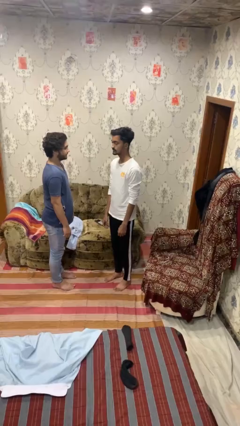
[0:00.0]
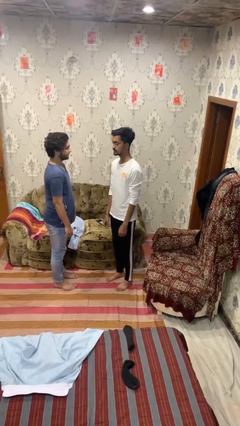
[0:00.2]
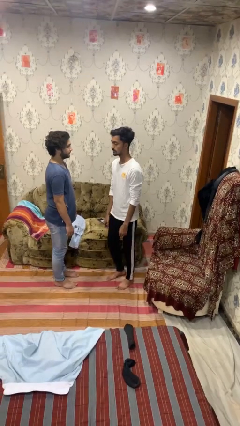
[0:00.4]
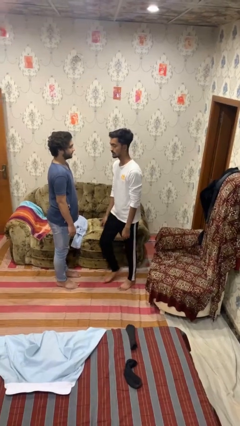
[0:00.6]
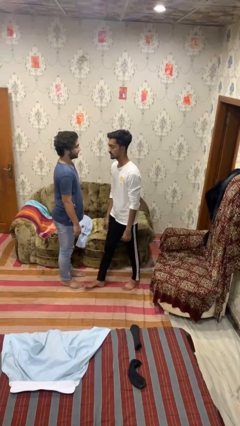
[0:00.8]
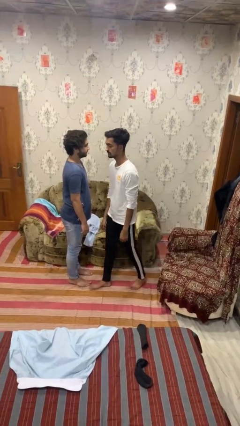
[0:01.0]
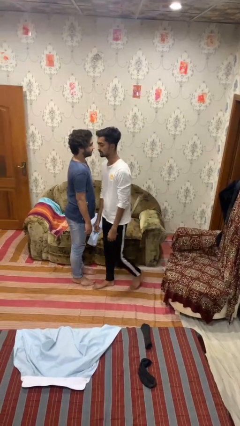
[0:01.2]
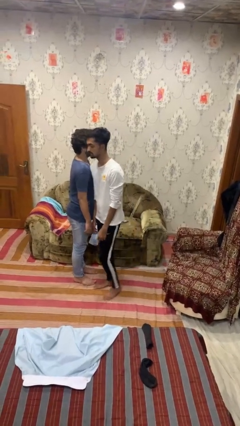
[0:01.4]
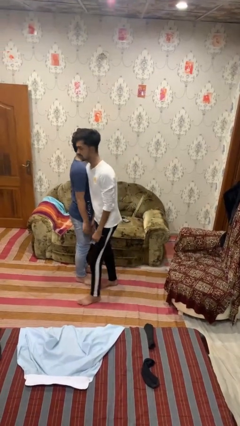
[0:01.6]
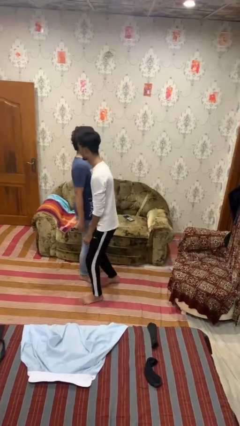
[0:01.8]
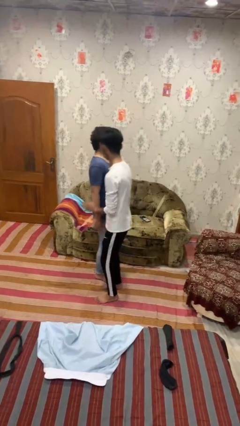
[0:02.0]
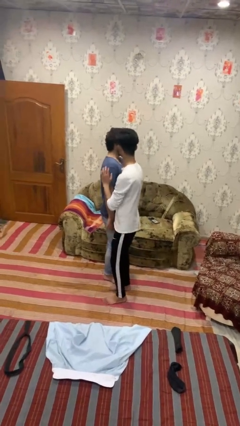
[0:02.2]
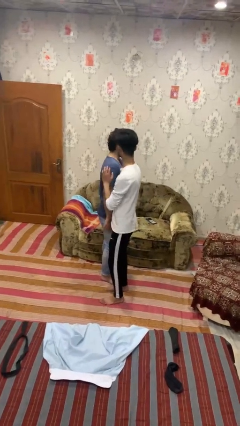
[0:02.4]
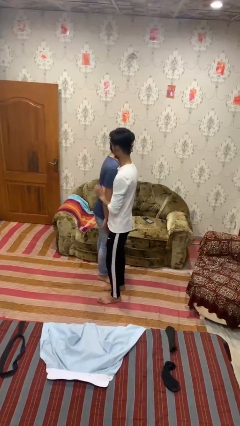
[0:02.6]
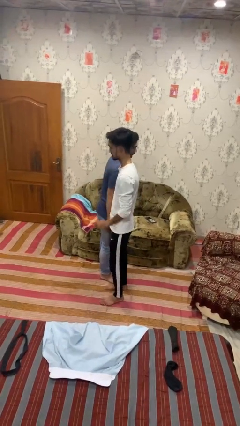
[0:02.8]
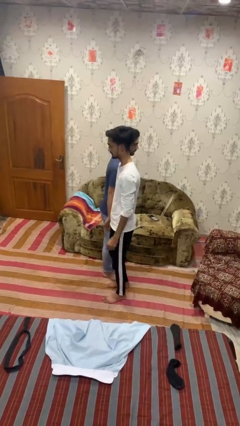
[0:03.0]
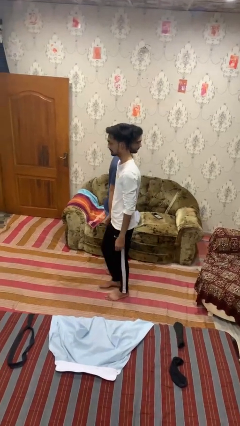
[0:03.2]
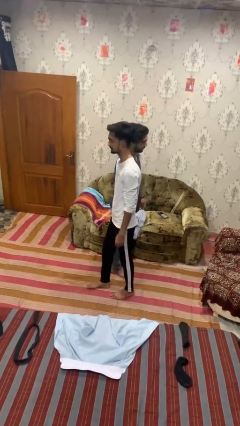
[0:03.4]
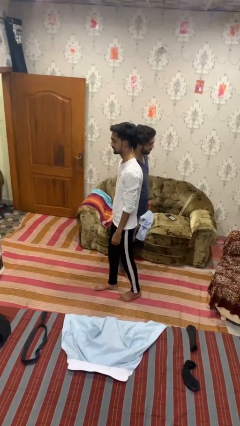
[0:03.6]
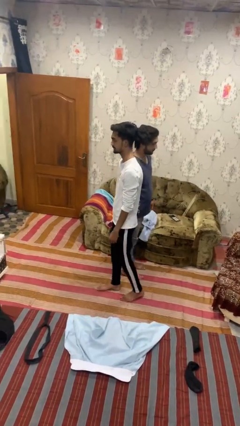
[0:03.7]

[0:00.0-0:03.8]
person bumps into person

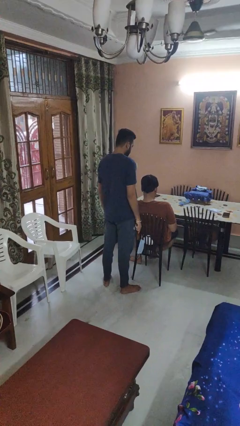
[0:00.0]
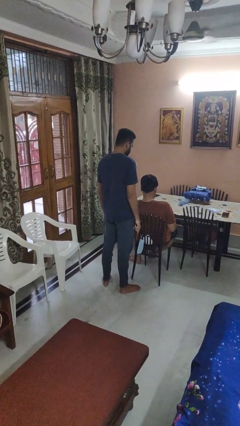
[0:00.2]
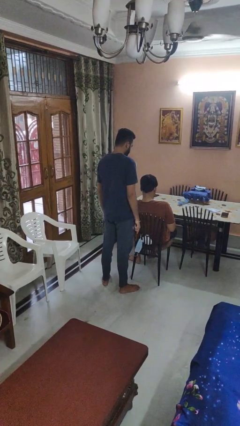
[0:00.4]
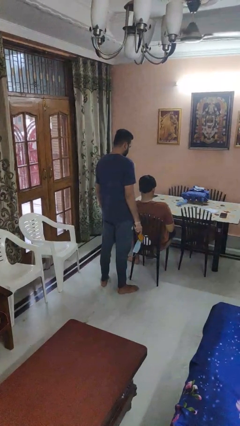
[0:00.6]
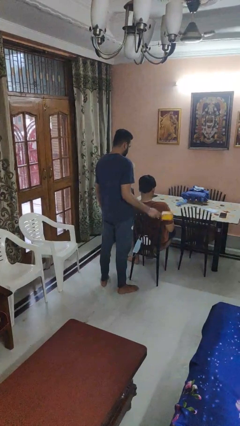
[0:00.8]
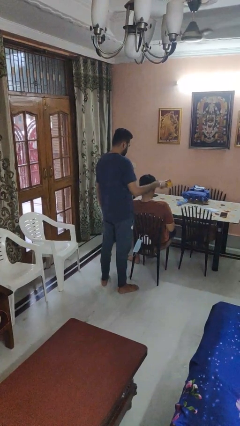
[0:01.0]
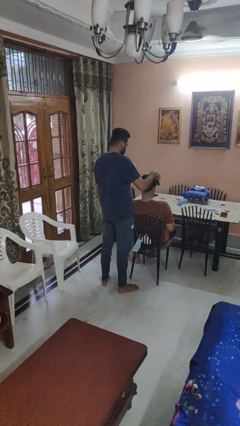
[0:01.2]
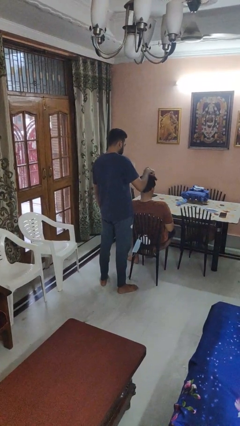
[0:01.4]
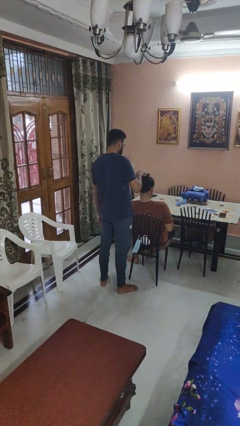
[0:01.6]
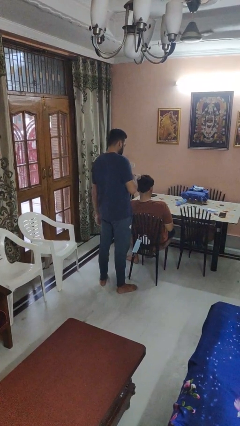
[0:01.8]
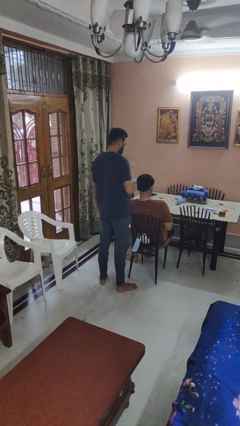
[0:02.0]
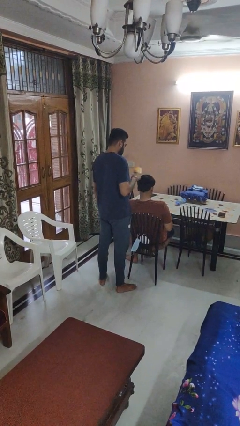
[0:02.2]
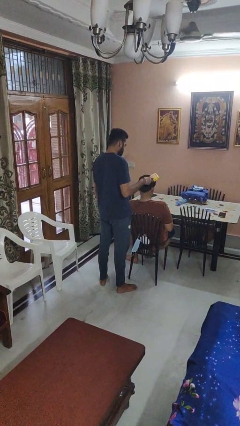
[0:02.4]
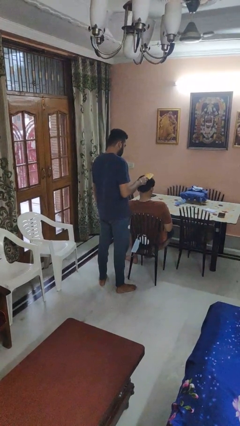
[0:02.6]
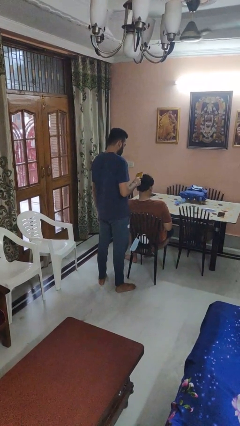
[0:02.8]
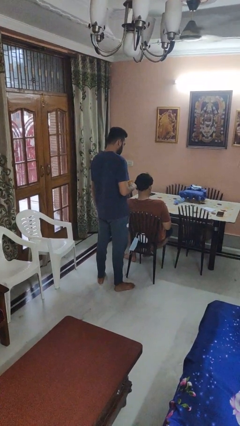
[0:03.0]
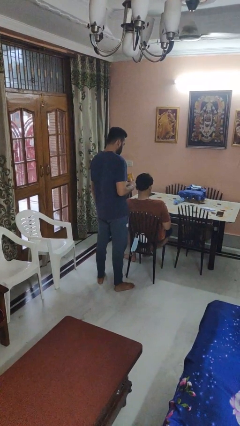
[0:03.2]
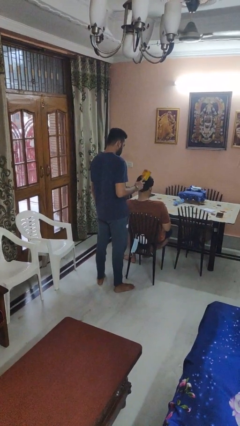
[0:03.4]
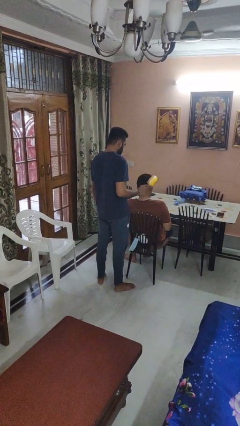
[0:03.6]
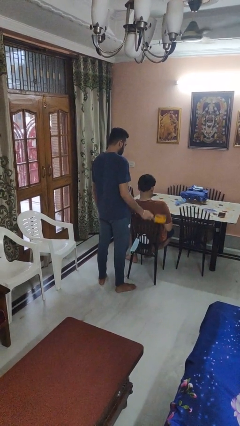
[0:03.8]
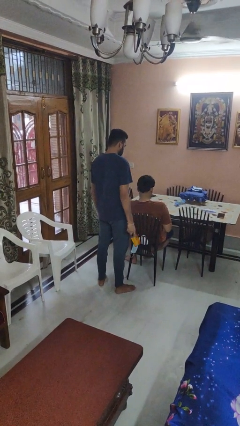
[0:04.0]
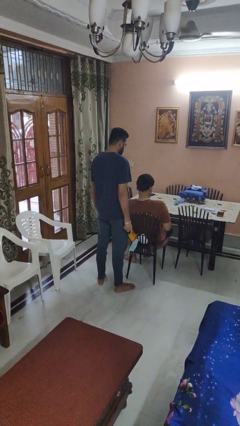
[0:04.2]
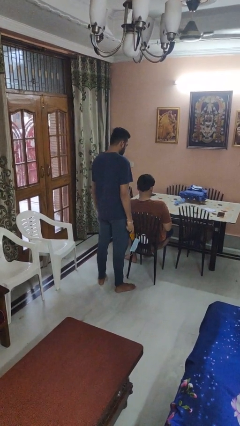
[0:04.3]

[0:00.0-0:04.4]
person brushes hair of person

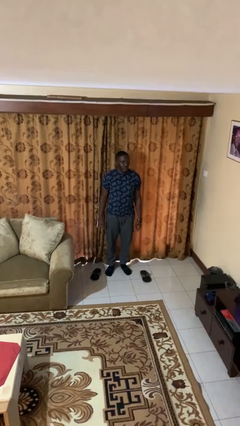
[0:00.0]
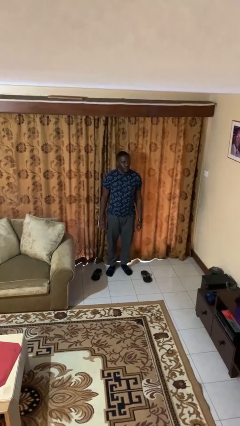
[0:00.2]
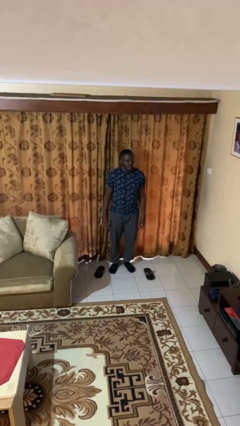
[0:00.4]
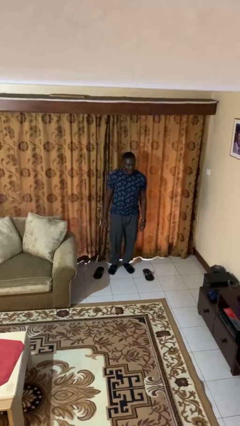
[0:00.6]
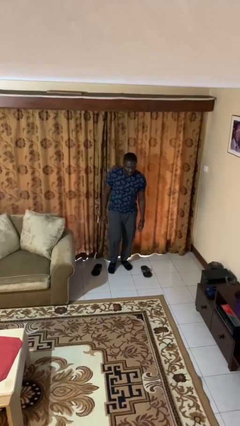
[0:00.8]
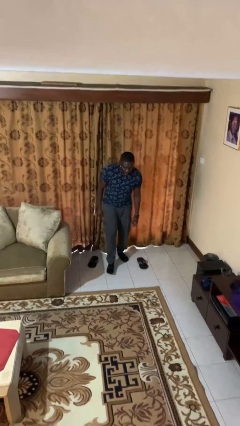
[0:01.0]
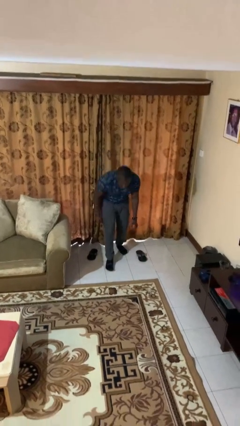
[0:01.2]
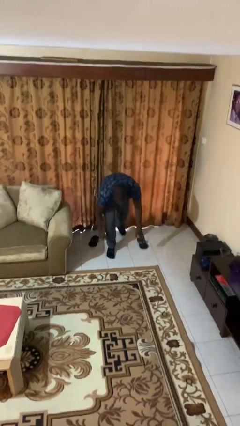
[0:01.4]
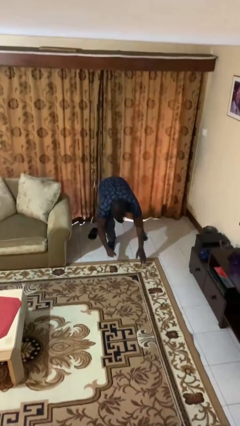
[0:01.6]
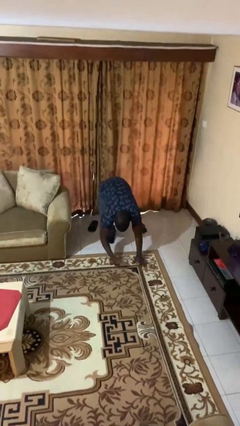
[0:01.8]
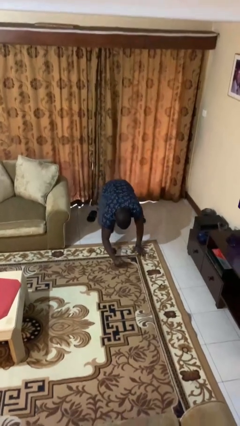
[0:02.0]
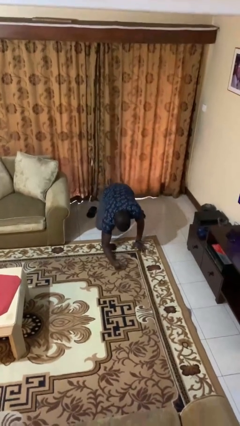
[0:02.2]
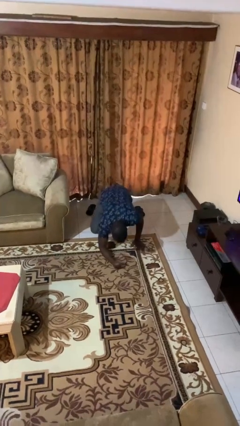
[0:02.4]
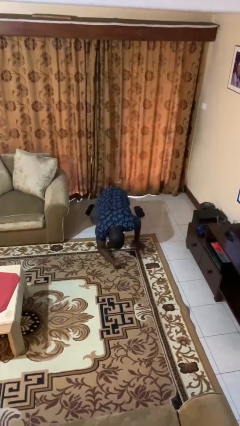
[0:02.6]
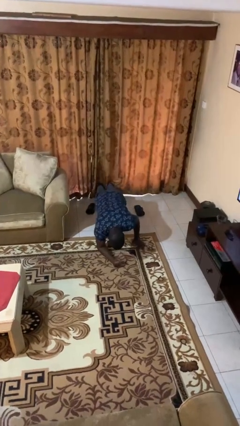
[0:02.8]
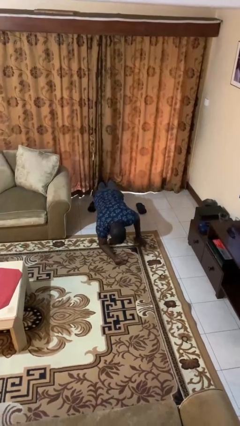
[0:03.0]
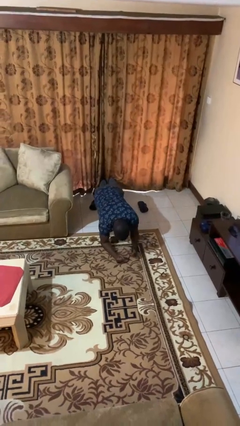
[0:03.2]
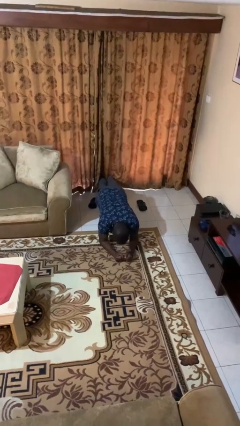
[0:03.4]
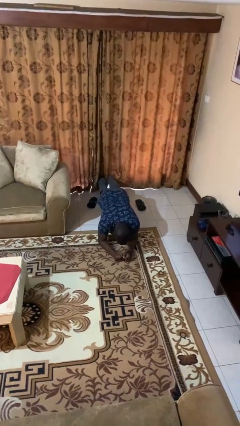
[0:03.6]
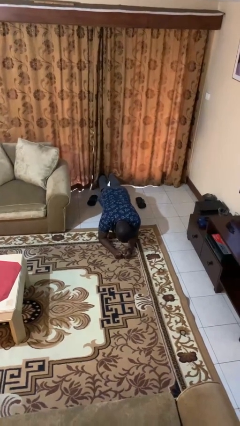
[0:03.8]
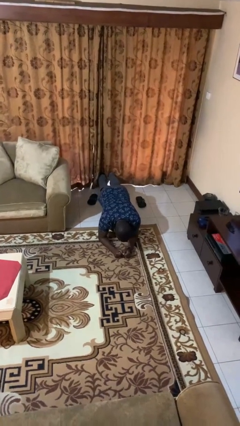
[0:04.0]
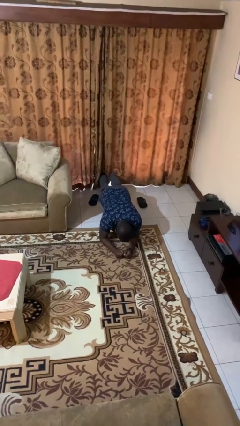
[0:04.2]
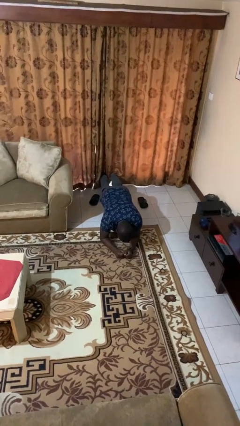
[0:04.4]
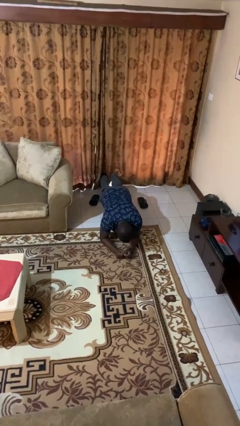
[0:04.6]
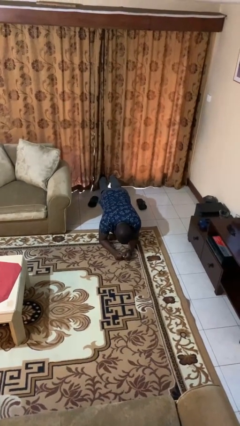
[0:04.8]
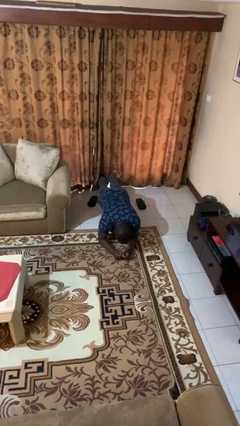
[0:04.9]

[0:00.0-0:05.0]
person exercises with plank

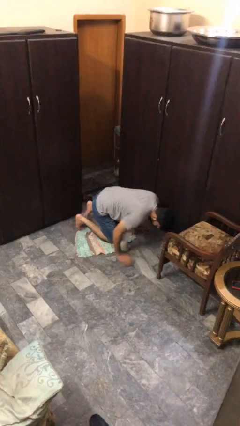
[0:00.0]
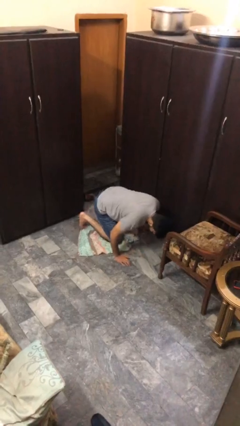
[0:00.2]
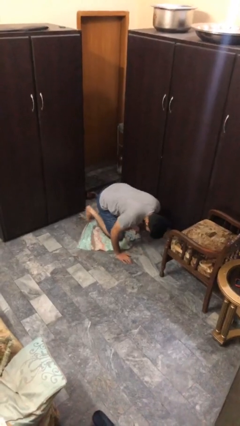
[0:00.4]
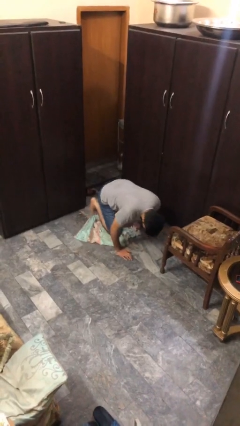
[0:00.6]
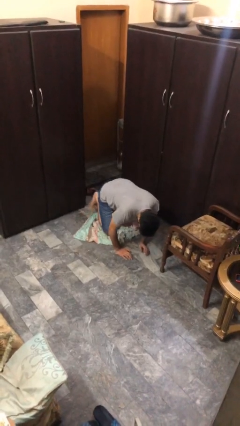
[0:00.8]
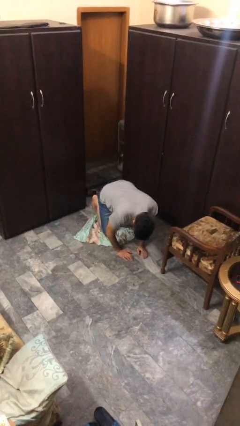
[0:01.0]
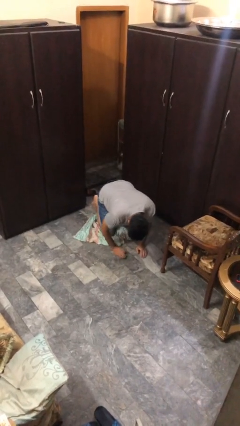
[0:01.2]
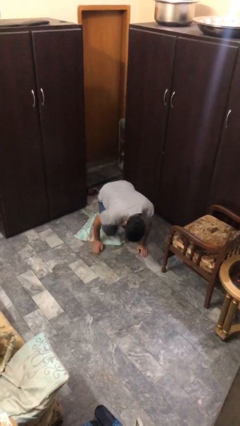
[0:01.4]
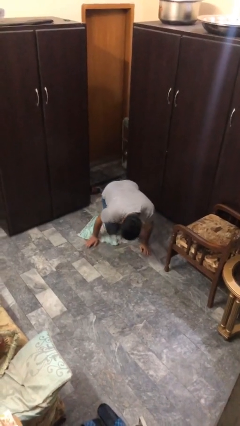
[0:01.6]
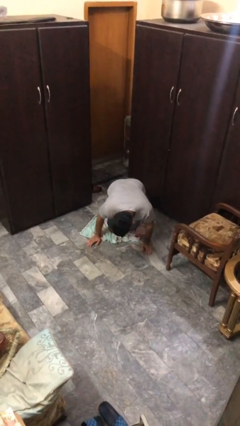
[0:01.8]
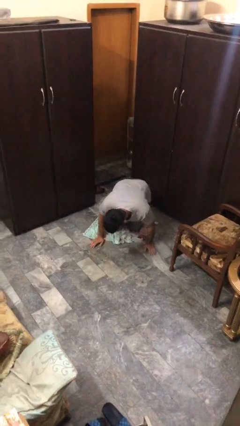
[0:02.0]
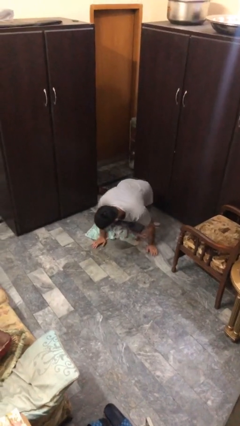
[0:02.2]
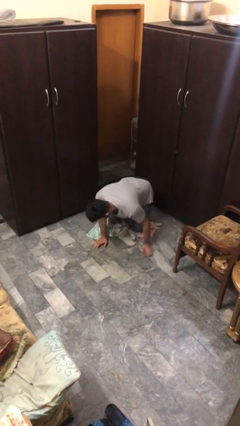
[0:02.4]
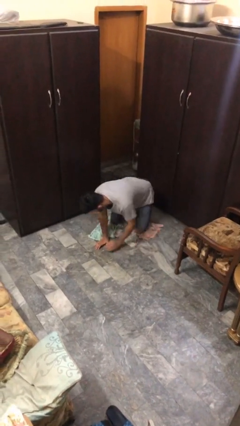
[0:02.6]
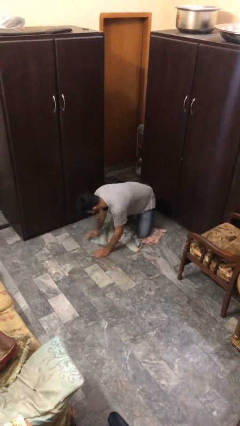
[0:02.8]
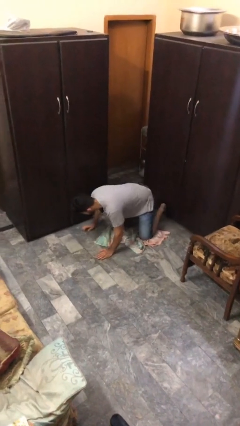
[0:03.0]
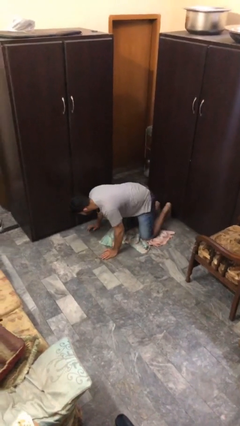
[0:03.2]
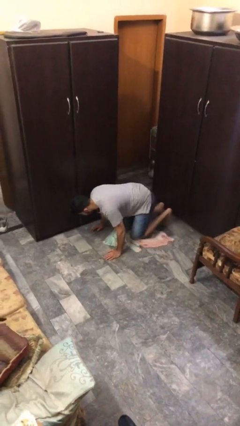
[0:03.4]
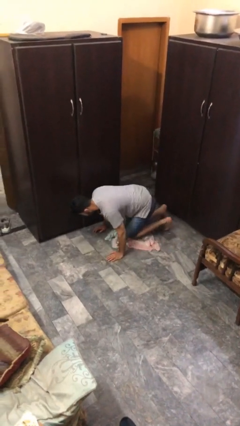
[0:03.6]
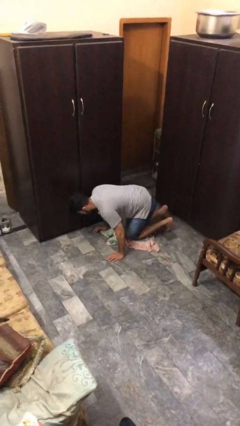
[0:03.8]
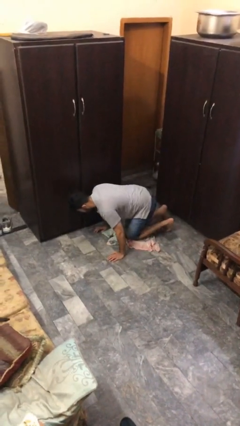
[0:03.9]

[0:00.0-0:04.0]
person crawls

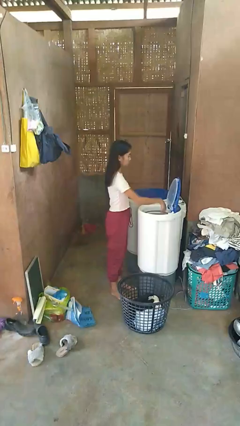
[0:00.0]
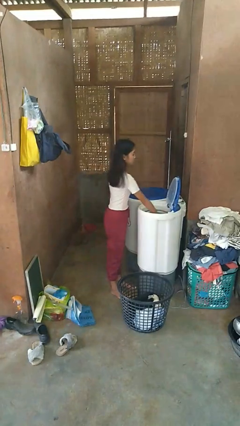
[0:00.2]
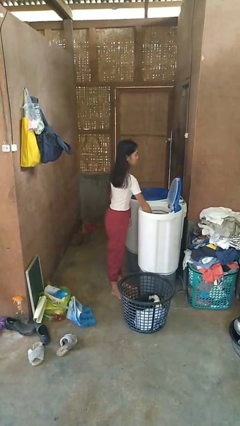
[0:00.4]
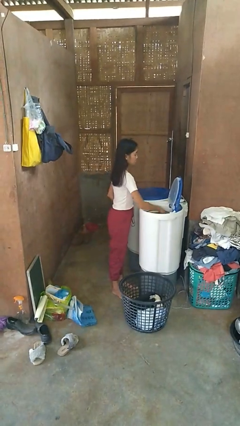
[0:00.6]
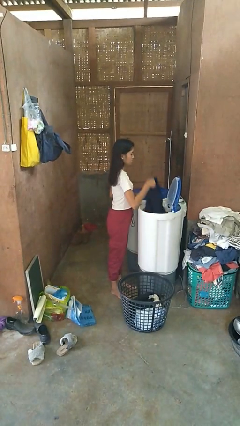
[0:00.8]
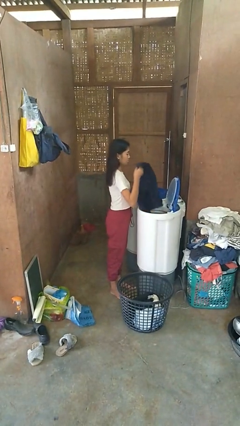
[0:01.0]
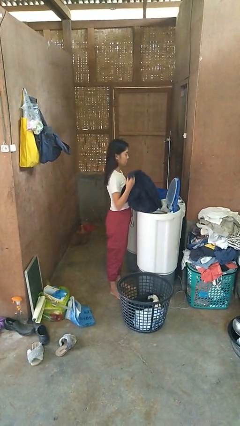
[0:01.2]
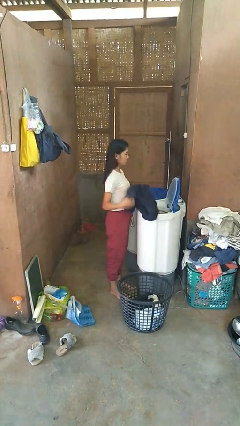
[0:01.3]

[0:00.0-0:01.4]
person unloads dryer
